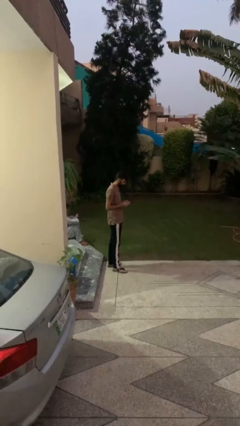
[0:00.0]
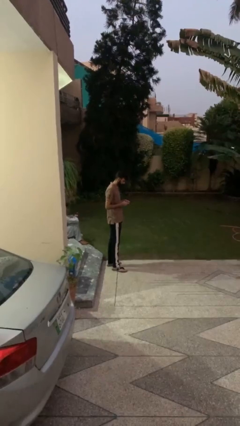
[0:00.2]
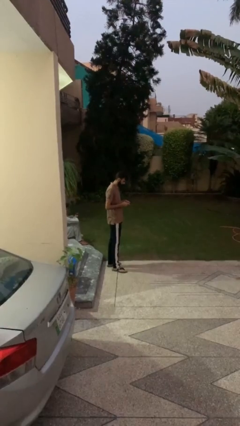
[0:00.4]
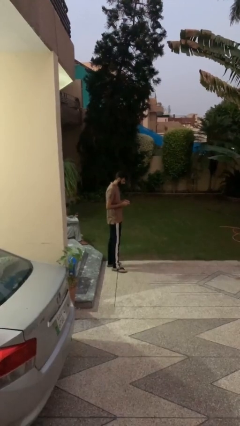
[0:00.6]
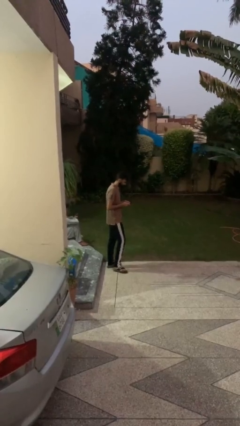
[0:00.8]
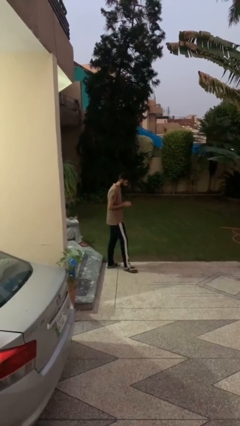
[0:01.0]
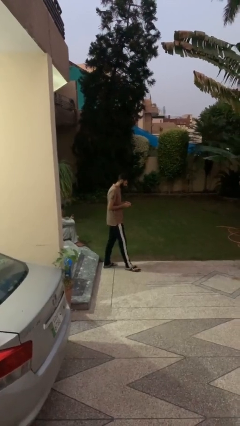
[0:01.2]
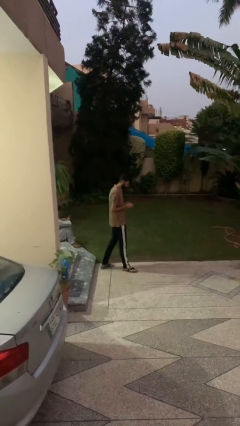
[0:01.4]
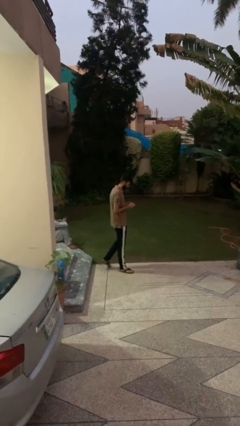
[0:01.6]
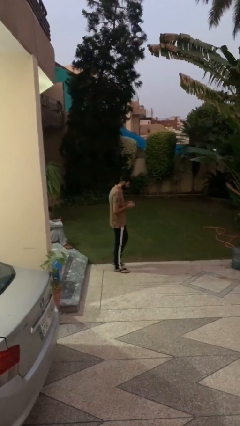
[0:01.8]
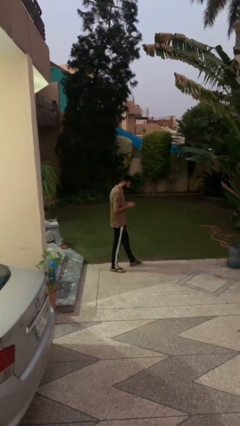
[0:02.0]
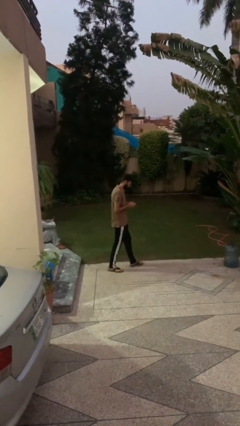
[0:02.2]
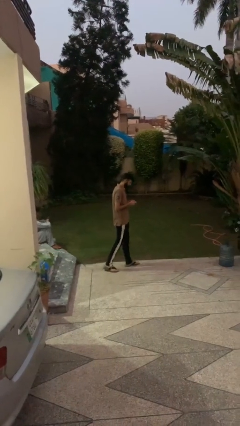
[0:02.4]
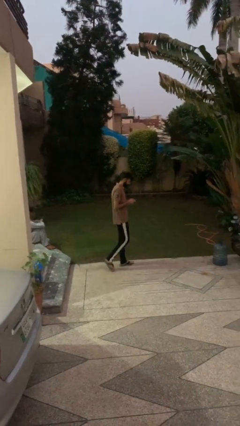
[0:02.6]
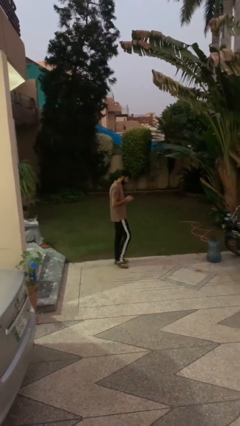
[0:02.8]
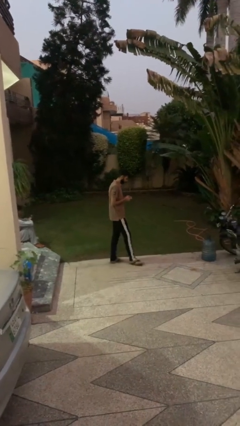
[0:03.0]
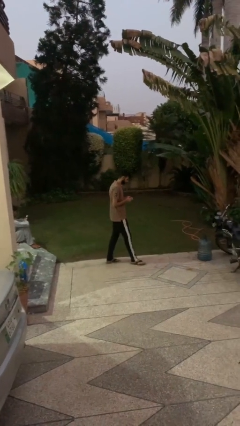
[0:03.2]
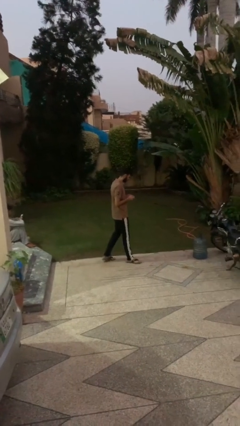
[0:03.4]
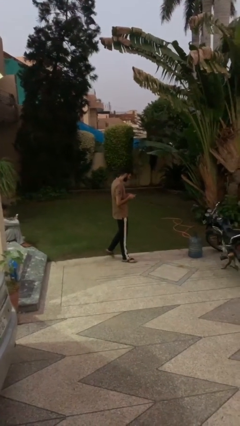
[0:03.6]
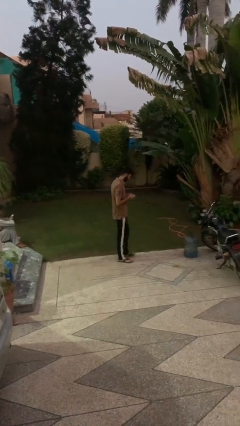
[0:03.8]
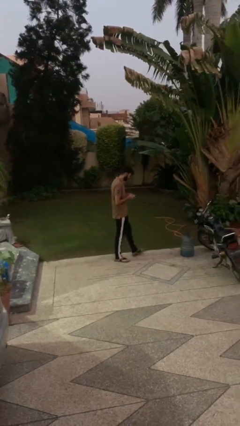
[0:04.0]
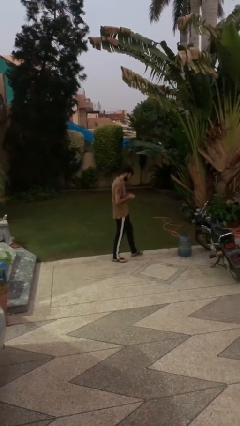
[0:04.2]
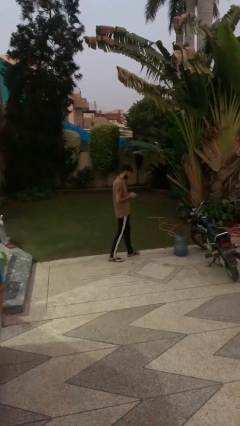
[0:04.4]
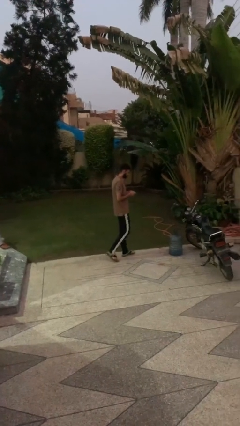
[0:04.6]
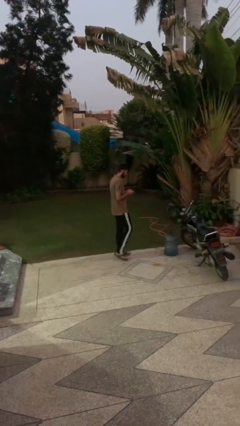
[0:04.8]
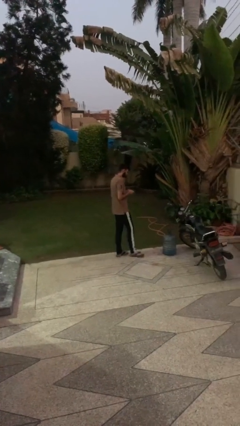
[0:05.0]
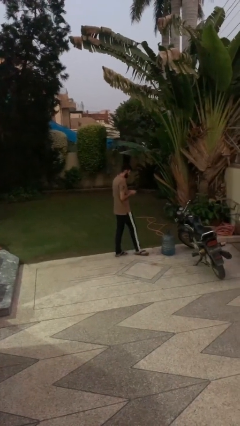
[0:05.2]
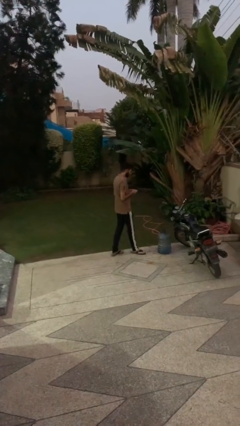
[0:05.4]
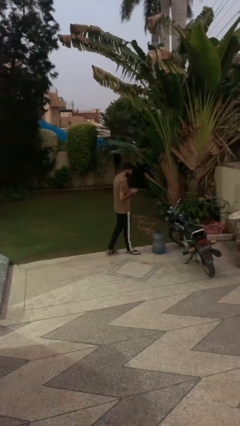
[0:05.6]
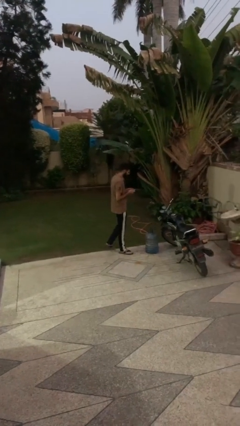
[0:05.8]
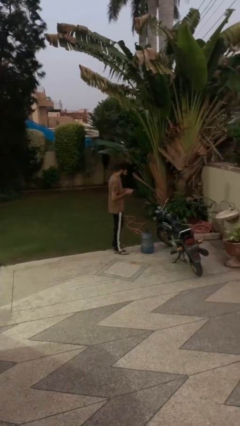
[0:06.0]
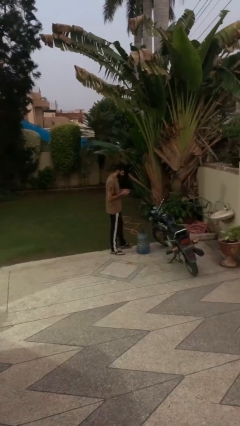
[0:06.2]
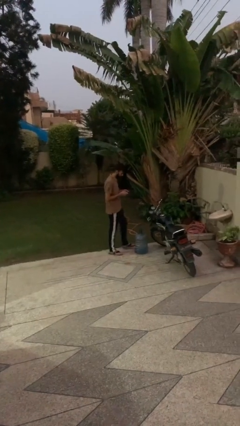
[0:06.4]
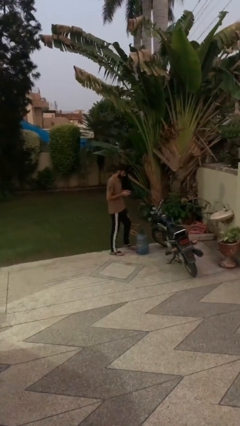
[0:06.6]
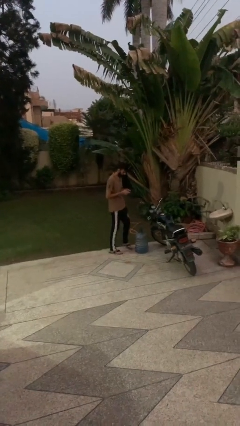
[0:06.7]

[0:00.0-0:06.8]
person texts on phone

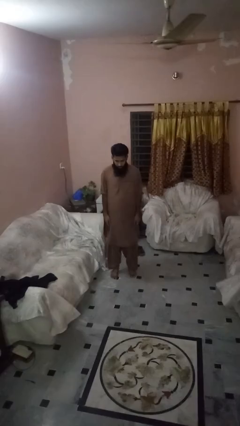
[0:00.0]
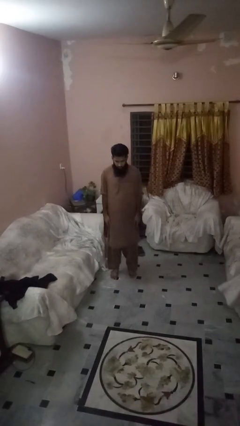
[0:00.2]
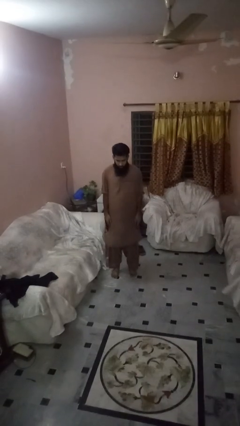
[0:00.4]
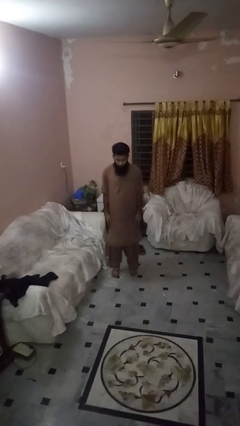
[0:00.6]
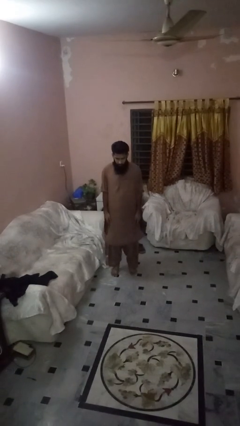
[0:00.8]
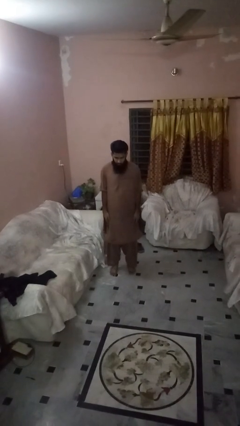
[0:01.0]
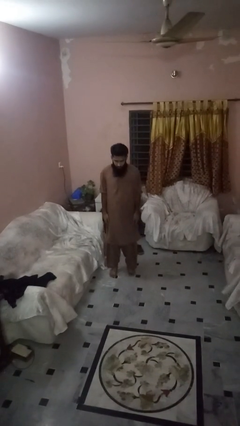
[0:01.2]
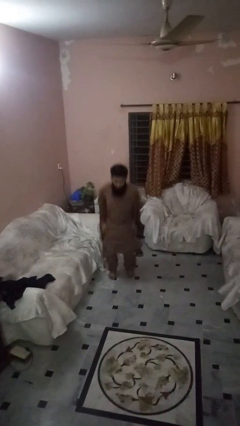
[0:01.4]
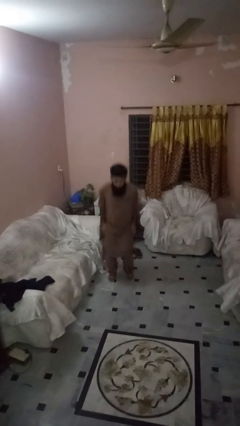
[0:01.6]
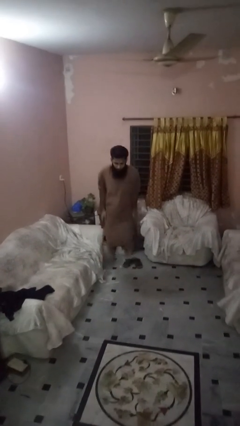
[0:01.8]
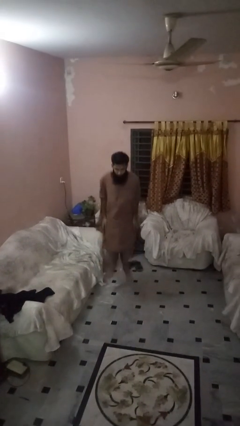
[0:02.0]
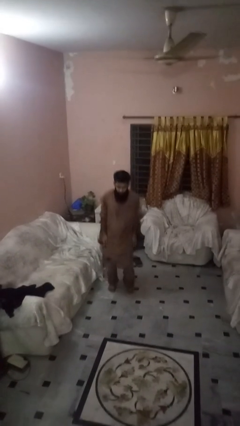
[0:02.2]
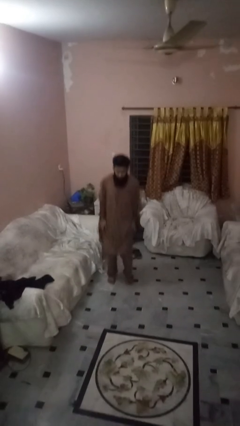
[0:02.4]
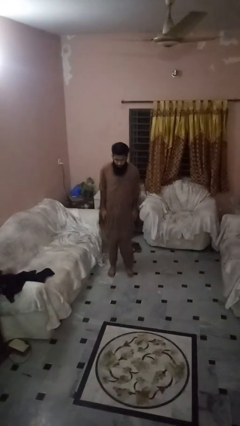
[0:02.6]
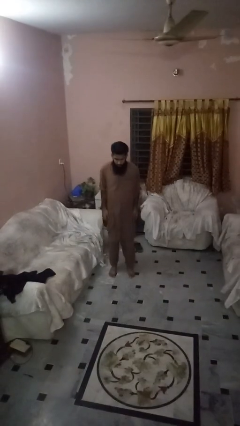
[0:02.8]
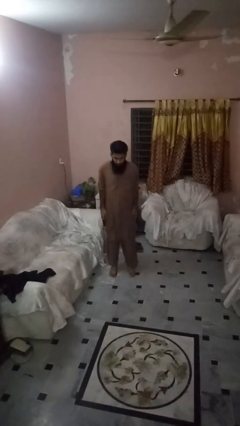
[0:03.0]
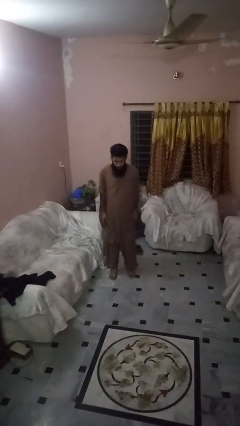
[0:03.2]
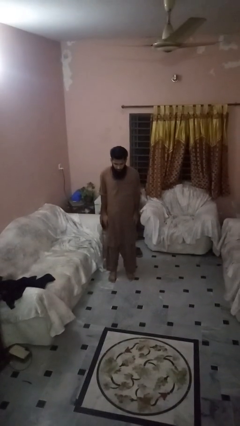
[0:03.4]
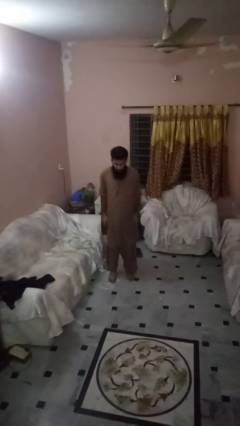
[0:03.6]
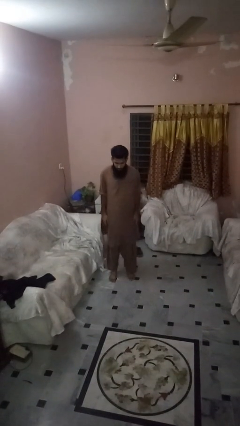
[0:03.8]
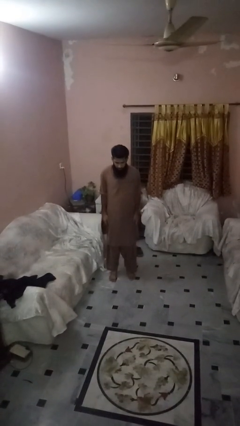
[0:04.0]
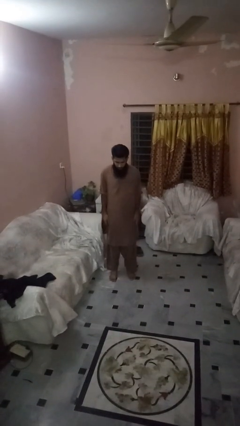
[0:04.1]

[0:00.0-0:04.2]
person jumps

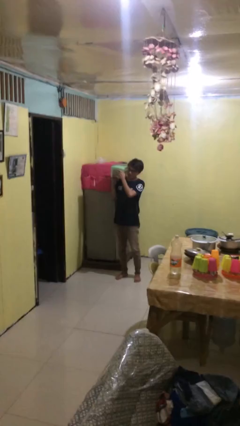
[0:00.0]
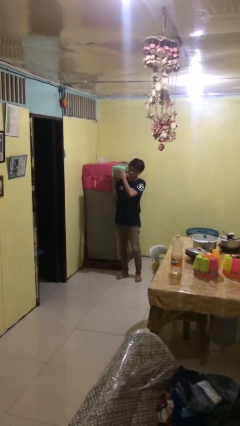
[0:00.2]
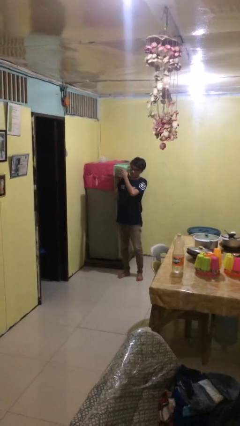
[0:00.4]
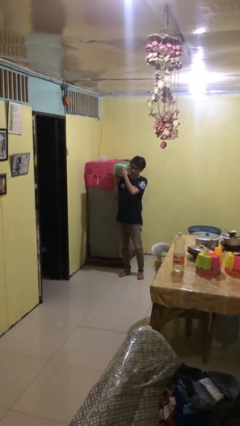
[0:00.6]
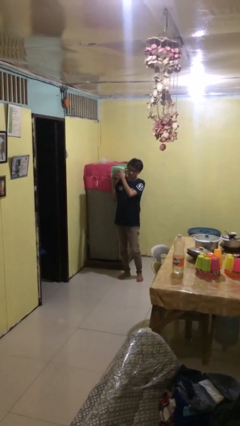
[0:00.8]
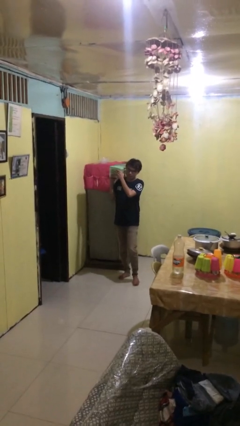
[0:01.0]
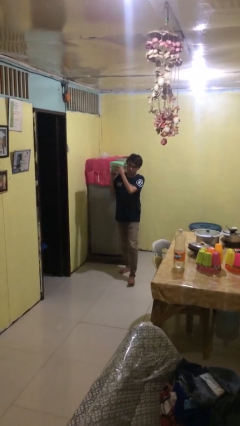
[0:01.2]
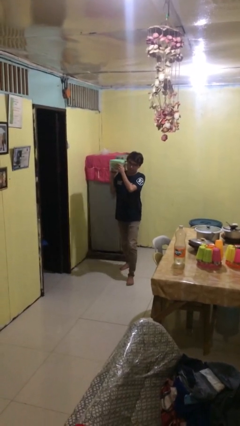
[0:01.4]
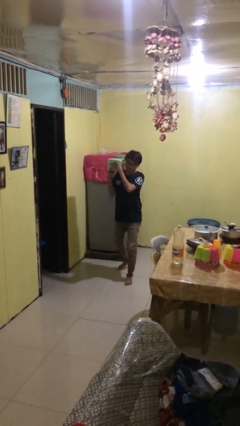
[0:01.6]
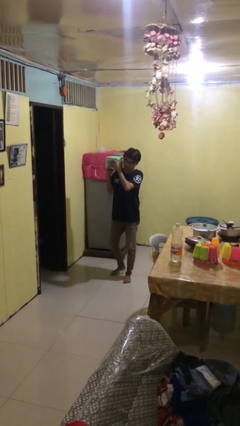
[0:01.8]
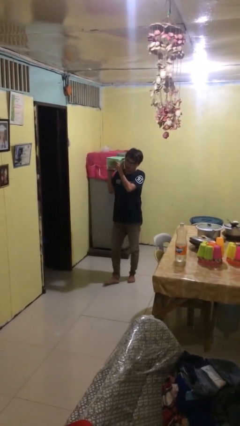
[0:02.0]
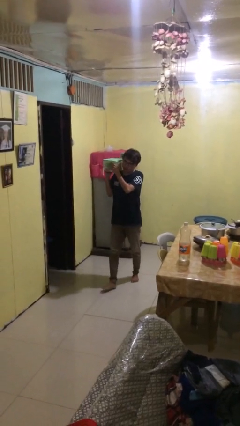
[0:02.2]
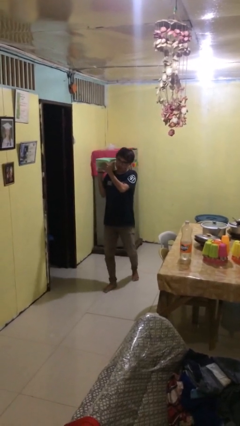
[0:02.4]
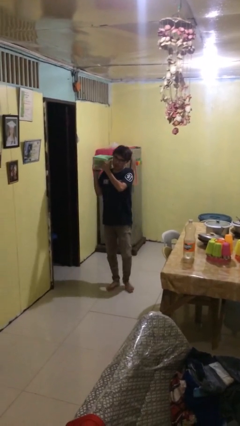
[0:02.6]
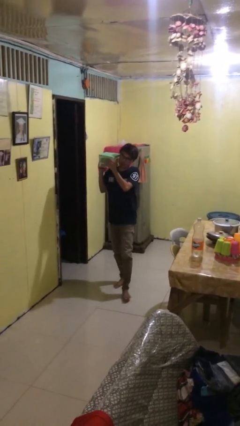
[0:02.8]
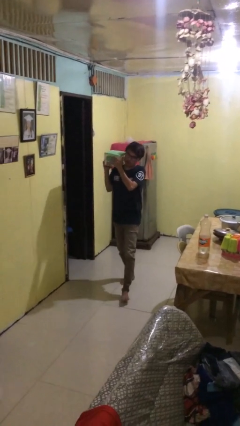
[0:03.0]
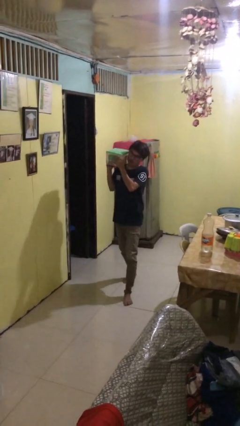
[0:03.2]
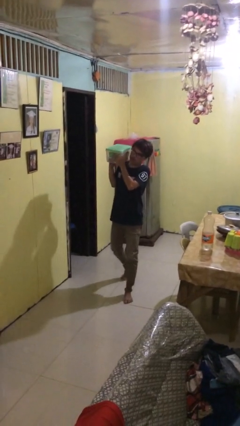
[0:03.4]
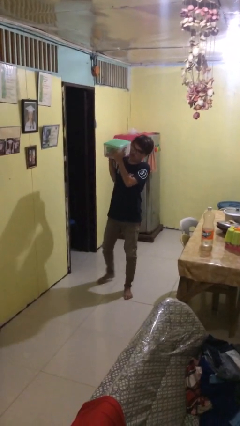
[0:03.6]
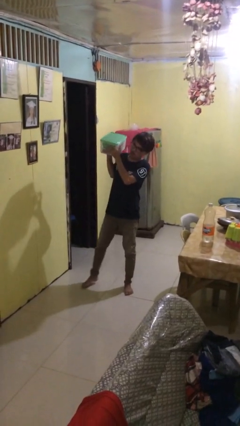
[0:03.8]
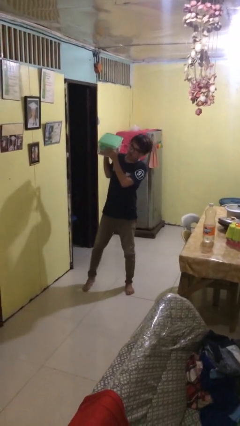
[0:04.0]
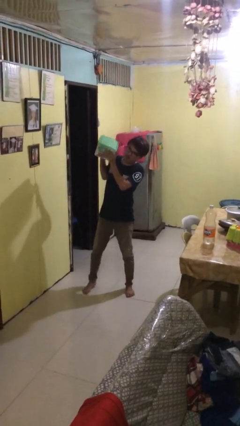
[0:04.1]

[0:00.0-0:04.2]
person carries heavy object

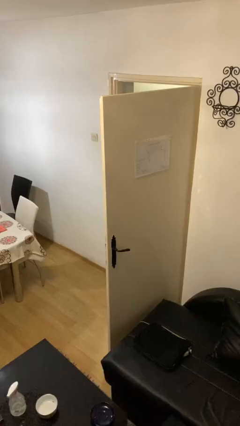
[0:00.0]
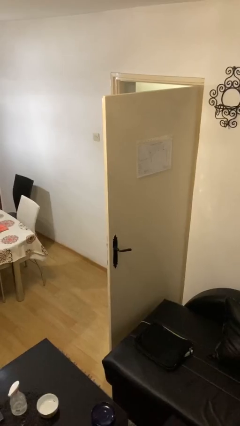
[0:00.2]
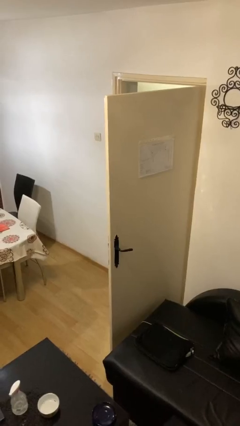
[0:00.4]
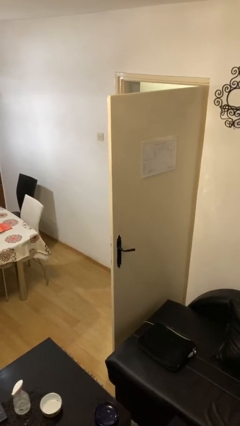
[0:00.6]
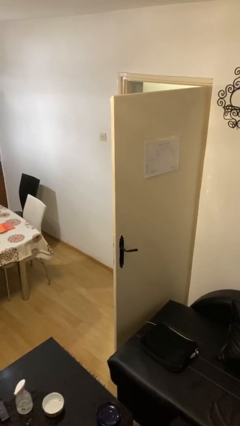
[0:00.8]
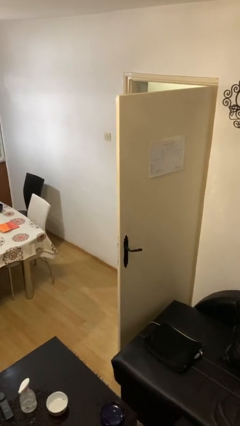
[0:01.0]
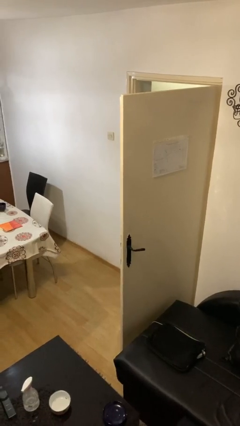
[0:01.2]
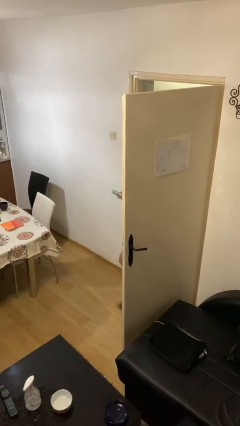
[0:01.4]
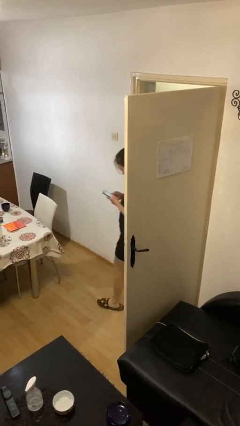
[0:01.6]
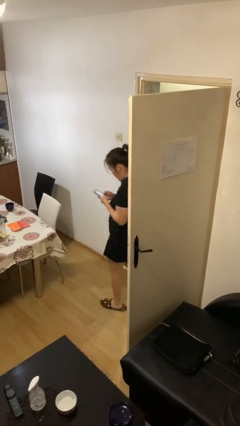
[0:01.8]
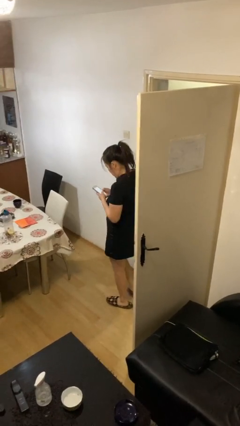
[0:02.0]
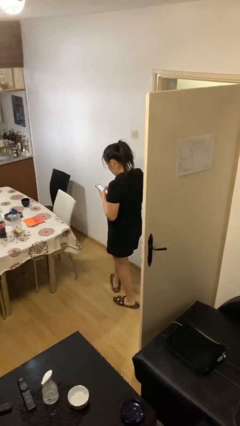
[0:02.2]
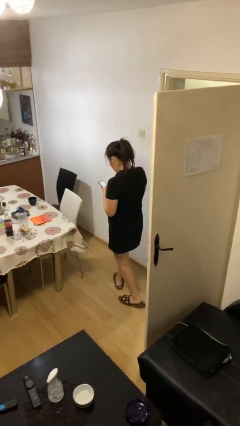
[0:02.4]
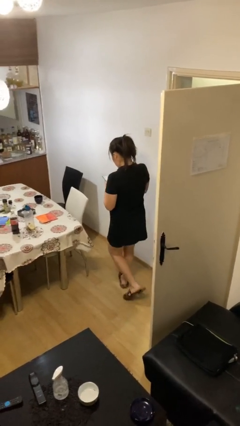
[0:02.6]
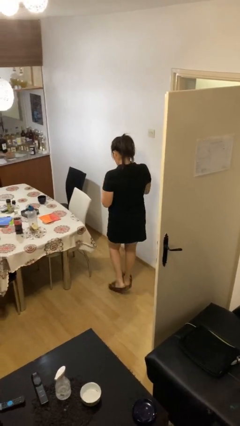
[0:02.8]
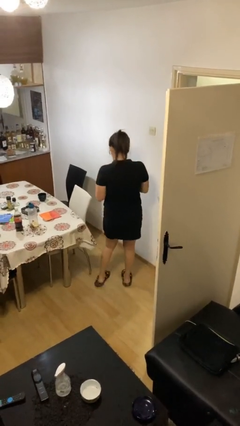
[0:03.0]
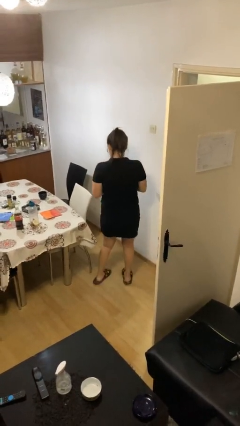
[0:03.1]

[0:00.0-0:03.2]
person enters scene through structure
